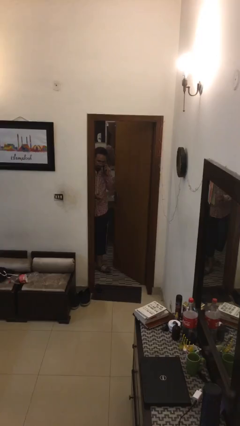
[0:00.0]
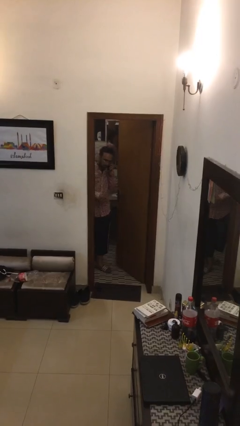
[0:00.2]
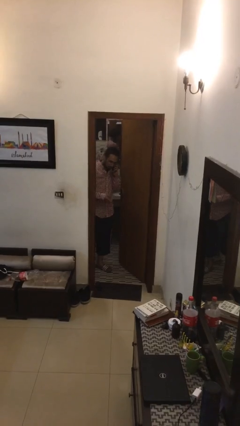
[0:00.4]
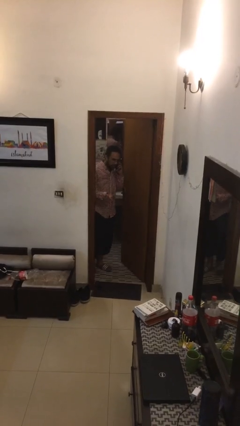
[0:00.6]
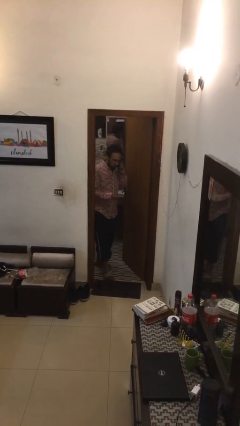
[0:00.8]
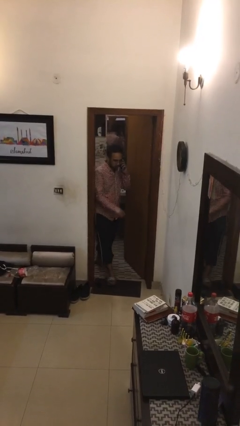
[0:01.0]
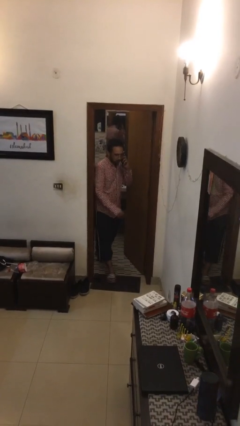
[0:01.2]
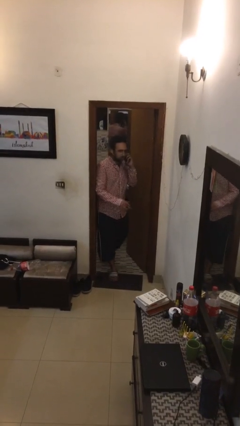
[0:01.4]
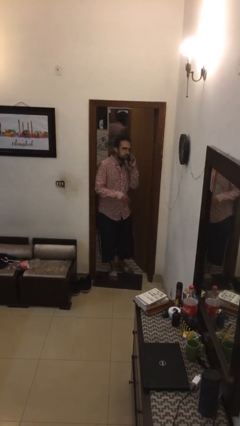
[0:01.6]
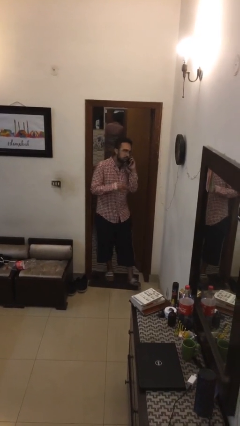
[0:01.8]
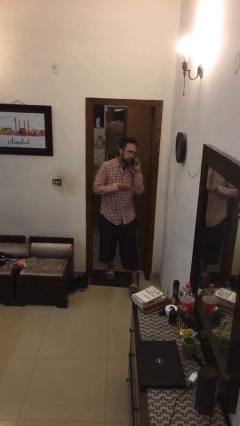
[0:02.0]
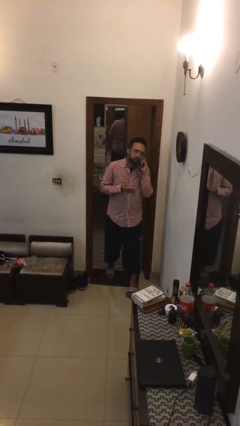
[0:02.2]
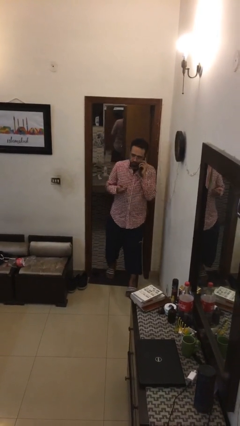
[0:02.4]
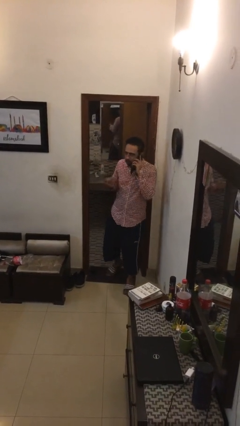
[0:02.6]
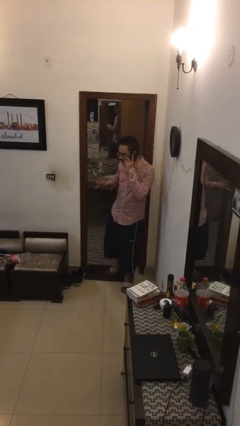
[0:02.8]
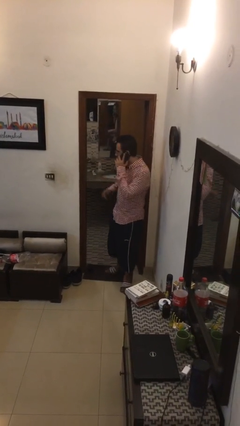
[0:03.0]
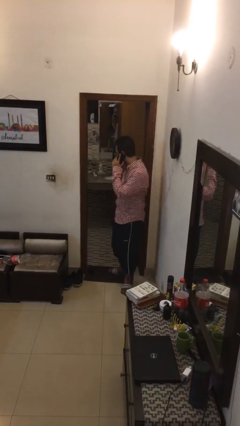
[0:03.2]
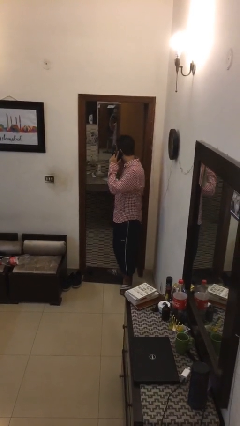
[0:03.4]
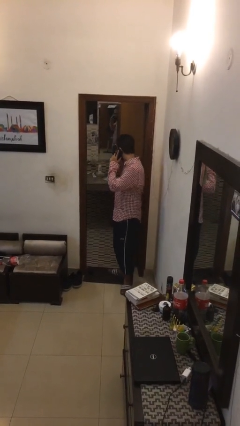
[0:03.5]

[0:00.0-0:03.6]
person enters scene through structure

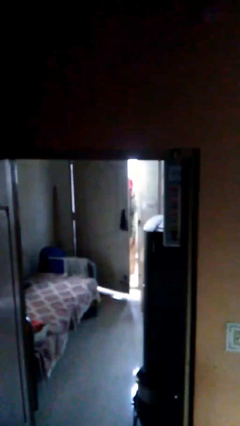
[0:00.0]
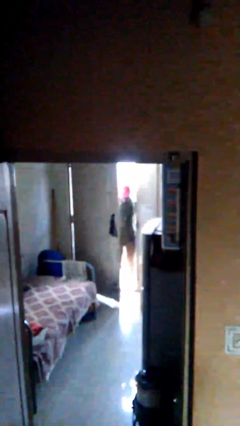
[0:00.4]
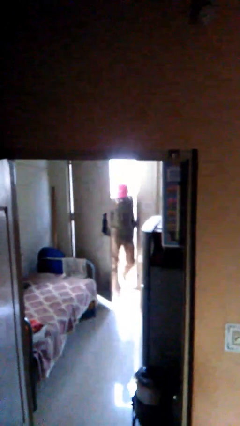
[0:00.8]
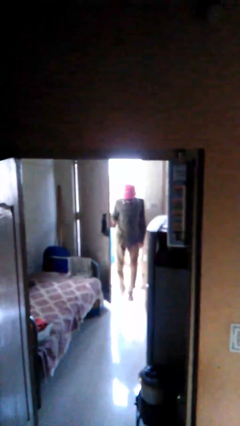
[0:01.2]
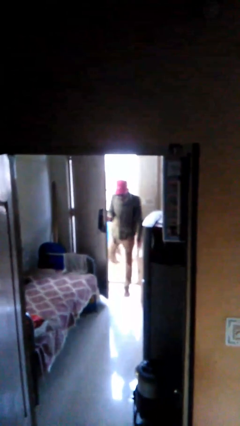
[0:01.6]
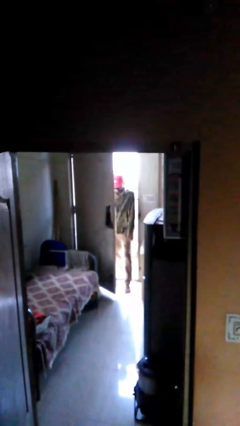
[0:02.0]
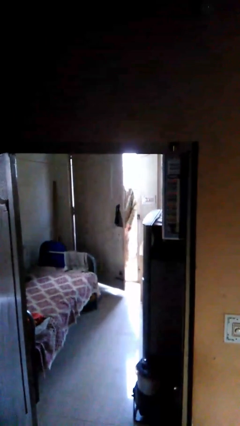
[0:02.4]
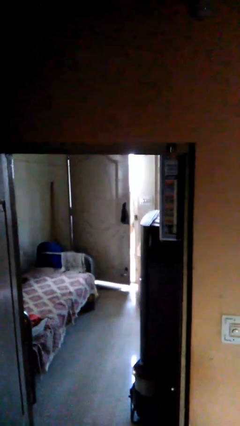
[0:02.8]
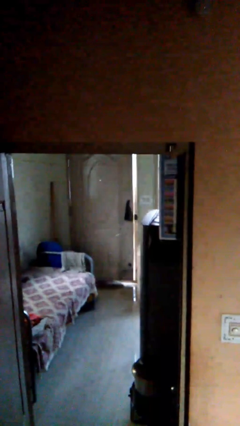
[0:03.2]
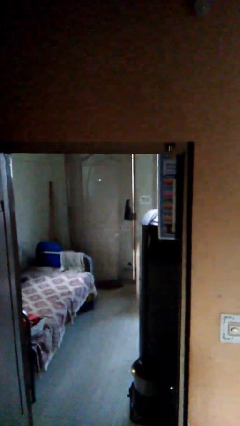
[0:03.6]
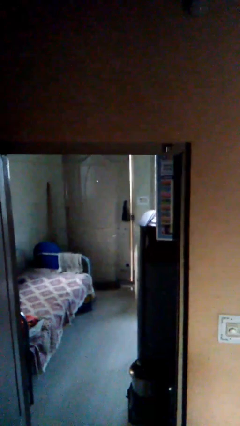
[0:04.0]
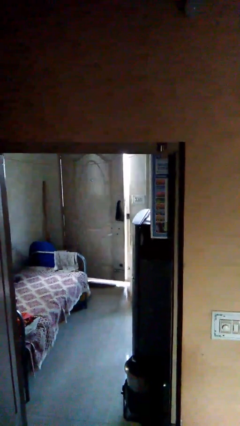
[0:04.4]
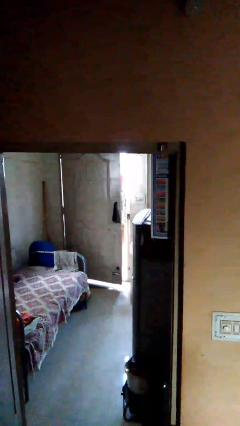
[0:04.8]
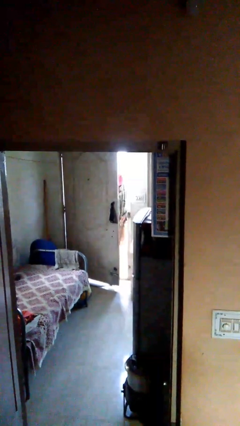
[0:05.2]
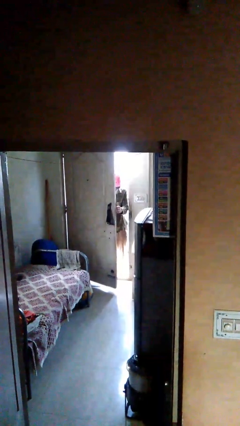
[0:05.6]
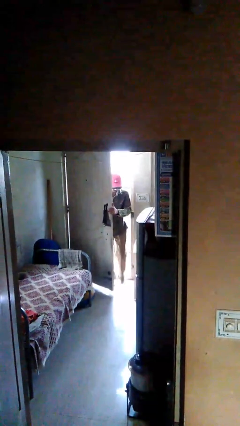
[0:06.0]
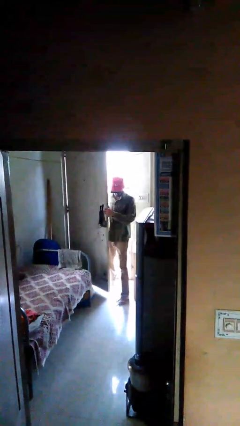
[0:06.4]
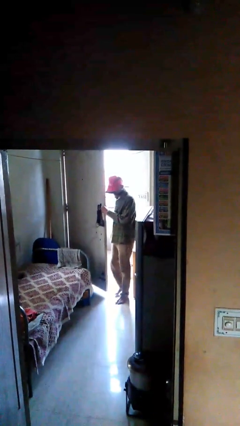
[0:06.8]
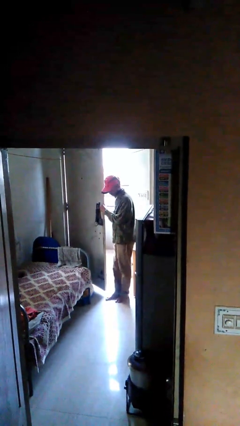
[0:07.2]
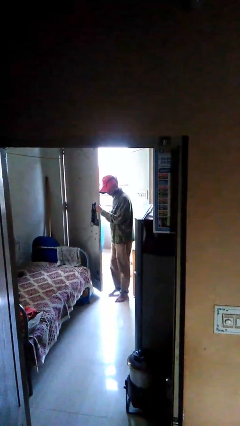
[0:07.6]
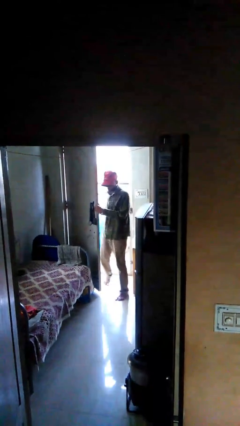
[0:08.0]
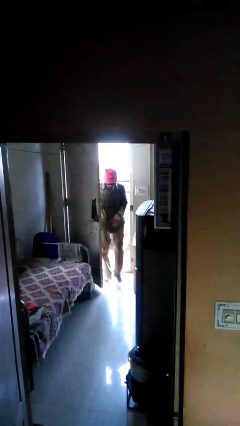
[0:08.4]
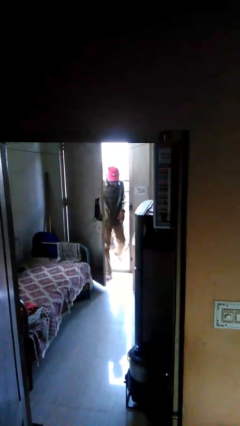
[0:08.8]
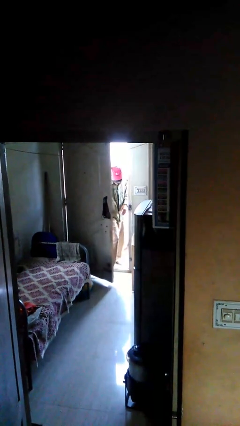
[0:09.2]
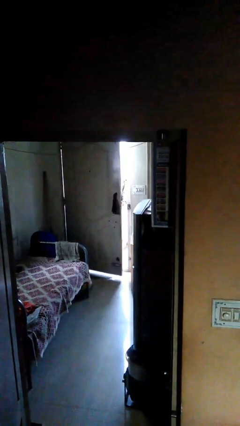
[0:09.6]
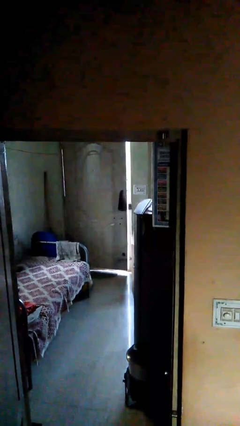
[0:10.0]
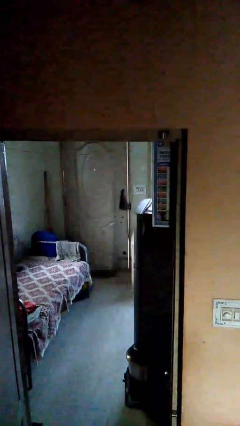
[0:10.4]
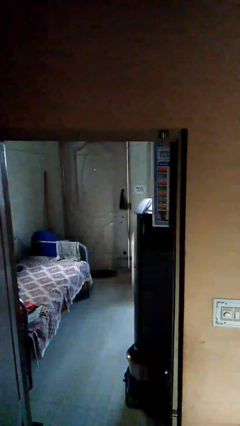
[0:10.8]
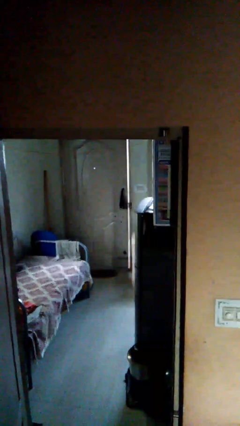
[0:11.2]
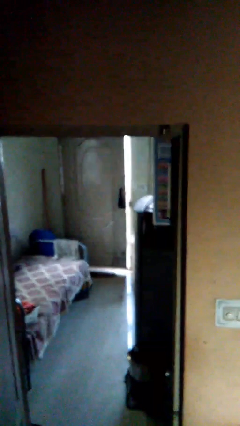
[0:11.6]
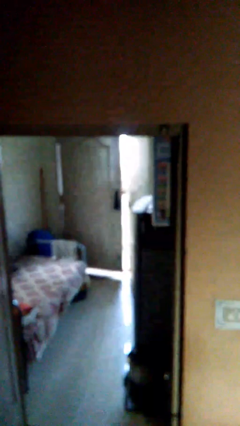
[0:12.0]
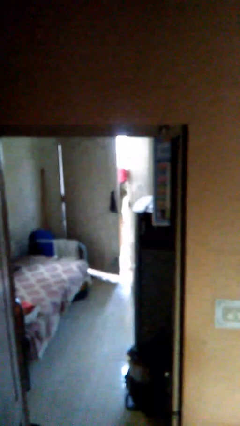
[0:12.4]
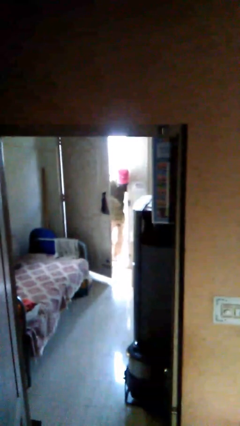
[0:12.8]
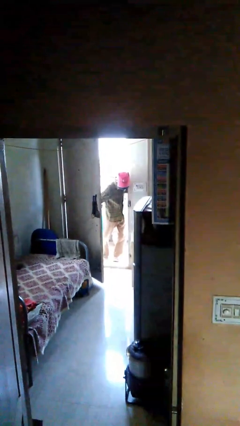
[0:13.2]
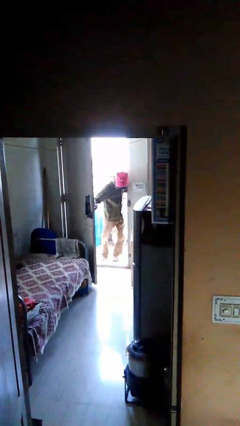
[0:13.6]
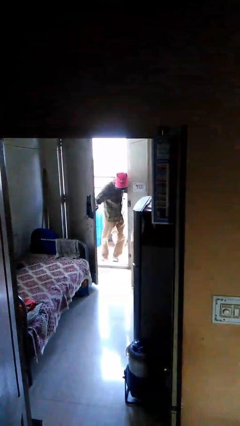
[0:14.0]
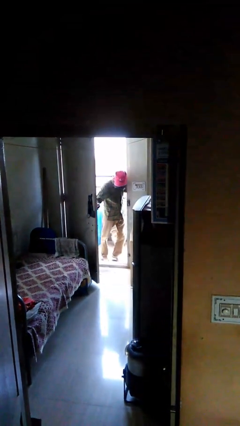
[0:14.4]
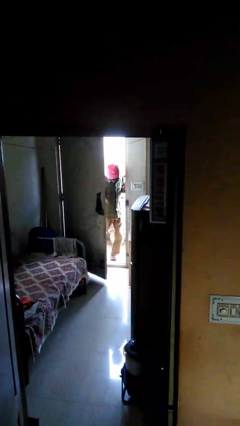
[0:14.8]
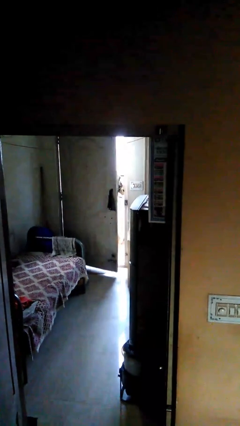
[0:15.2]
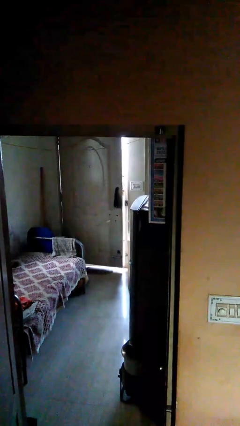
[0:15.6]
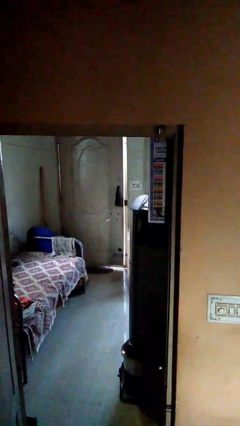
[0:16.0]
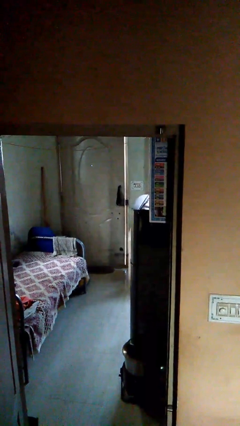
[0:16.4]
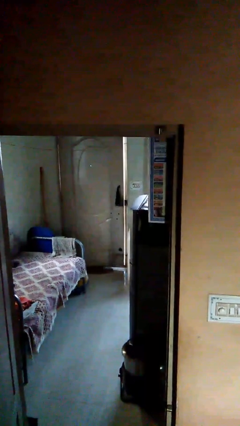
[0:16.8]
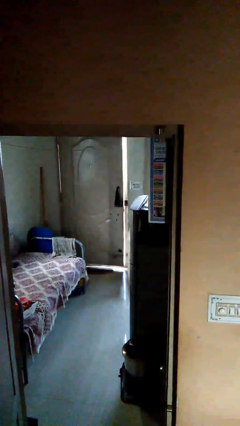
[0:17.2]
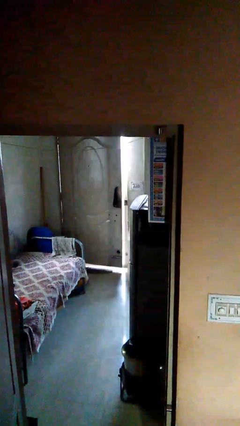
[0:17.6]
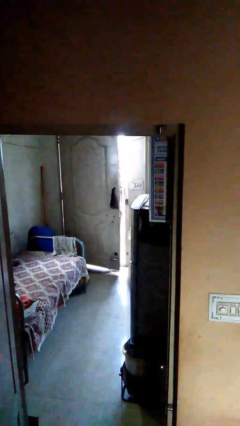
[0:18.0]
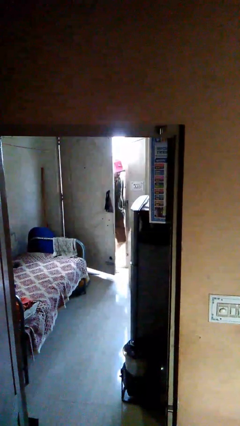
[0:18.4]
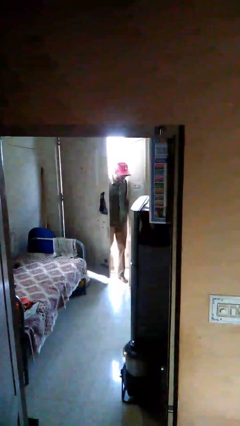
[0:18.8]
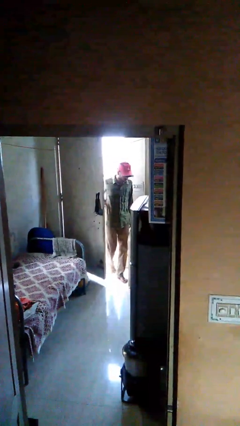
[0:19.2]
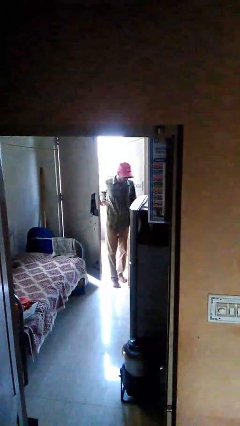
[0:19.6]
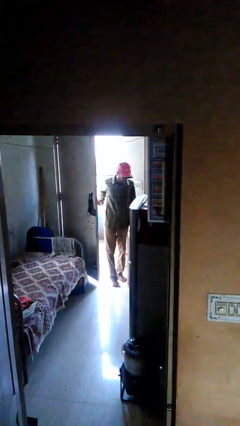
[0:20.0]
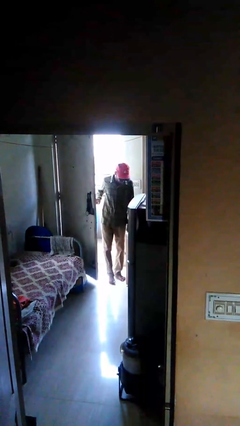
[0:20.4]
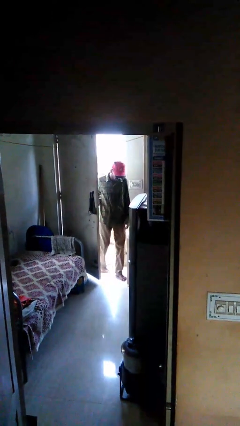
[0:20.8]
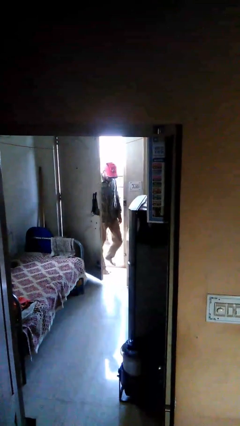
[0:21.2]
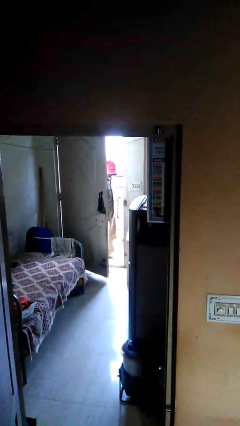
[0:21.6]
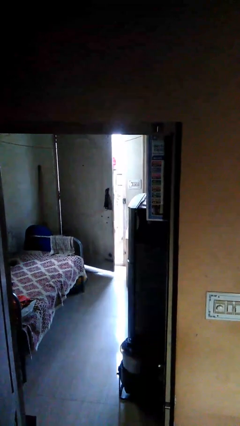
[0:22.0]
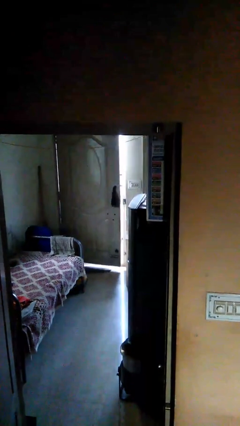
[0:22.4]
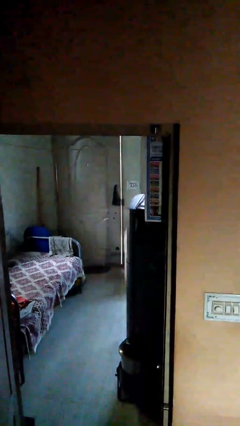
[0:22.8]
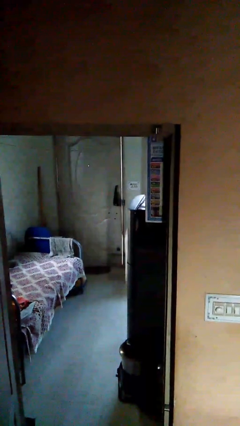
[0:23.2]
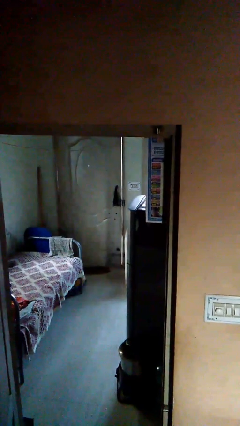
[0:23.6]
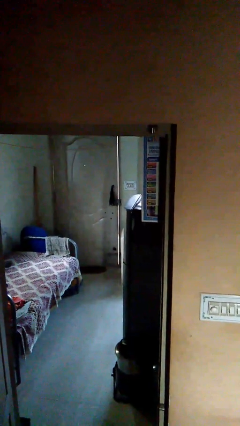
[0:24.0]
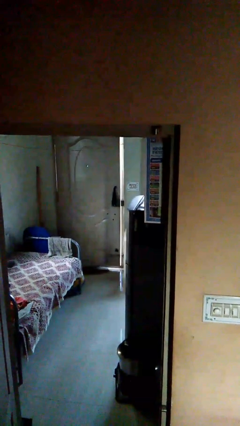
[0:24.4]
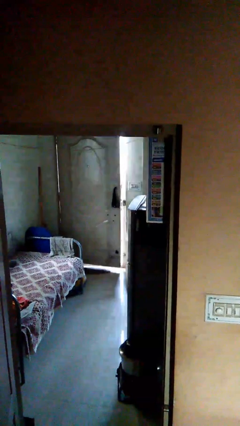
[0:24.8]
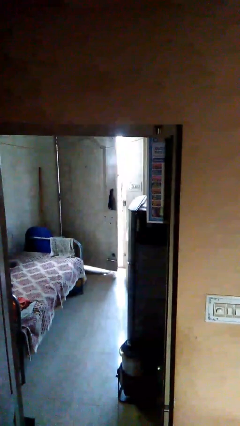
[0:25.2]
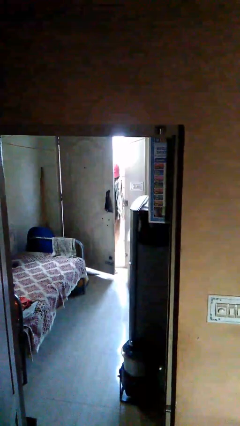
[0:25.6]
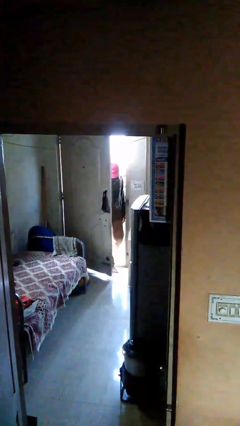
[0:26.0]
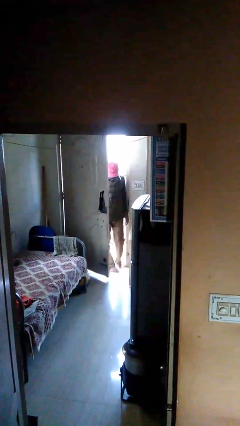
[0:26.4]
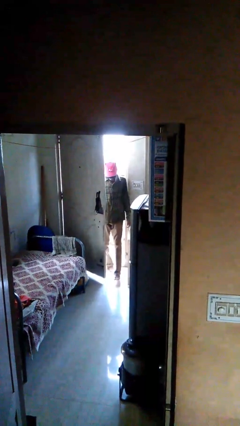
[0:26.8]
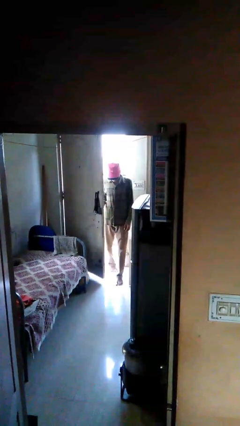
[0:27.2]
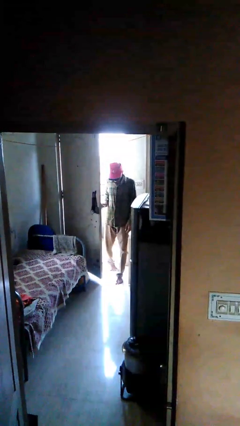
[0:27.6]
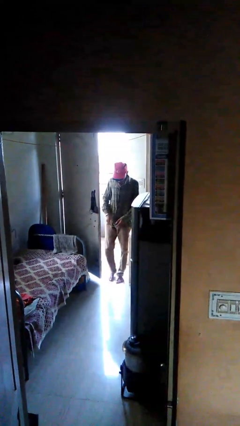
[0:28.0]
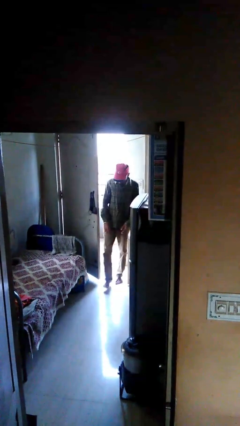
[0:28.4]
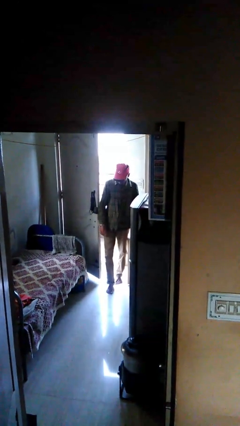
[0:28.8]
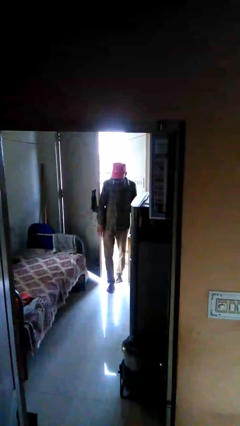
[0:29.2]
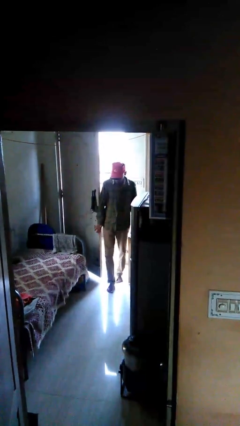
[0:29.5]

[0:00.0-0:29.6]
person opens facility door
